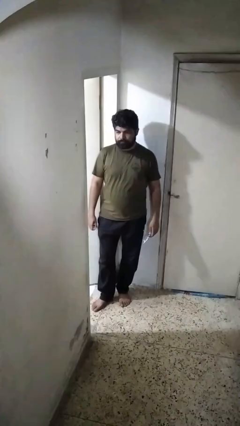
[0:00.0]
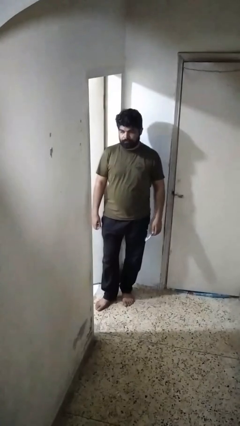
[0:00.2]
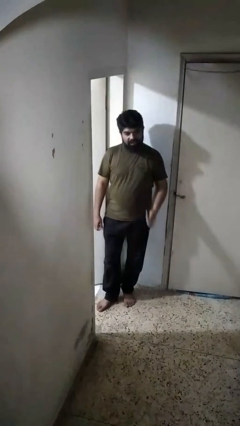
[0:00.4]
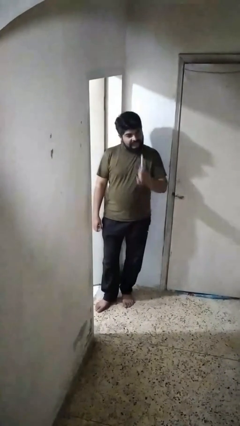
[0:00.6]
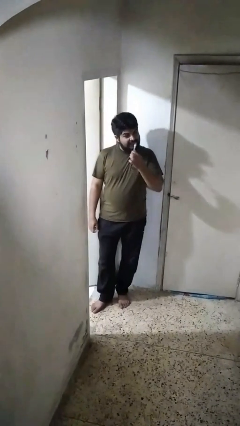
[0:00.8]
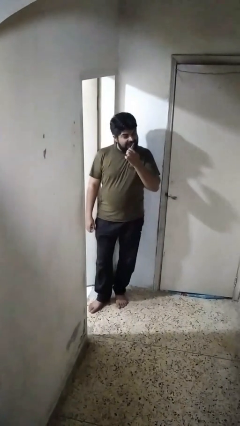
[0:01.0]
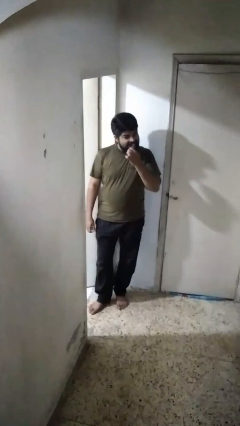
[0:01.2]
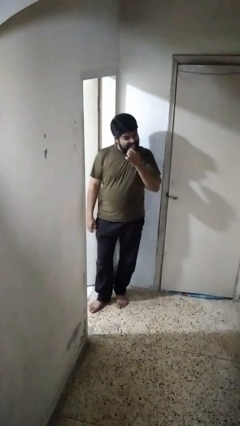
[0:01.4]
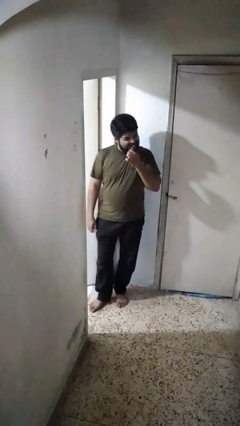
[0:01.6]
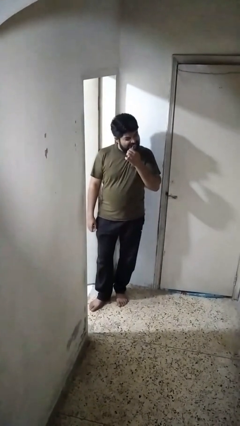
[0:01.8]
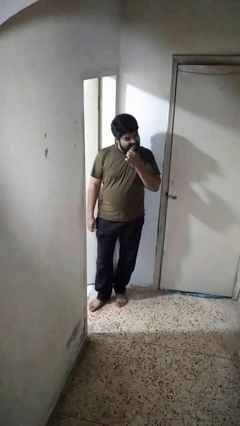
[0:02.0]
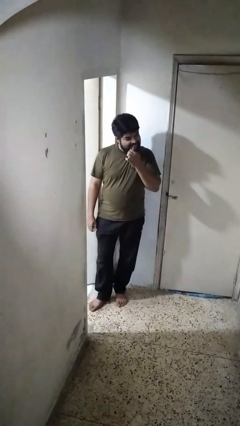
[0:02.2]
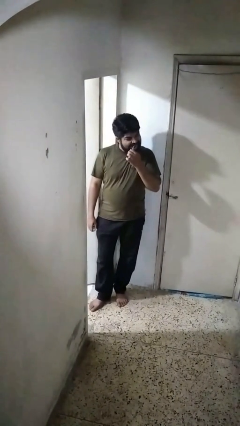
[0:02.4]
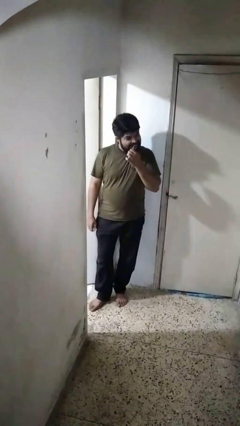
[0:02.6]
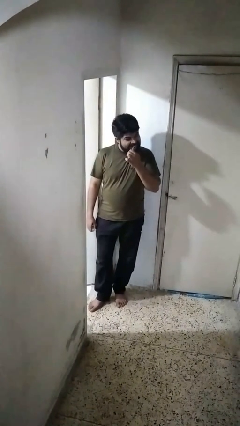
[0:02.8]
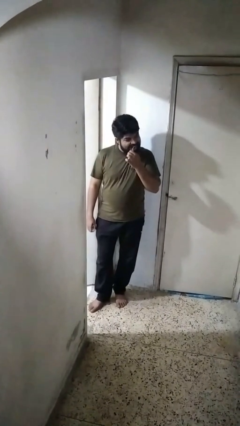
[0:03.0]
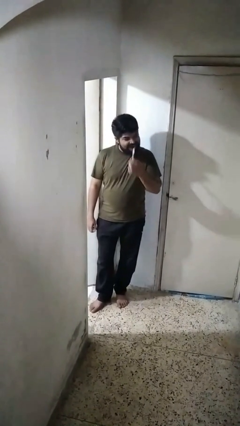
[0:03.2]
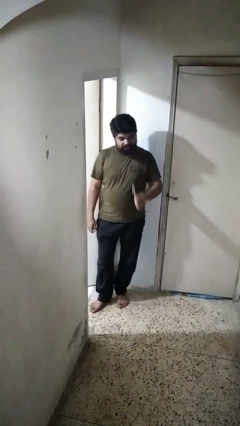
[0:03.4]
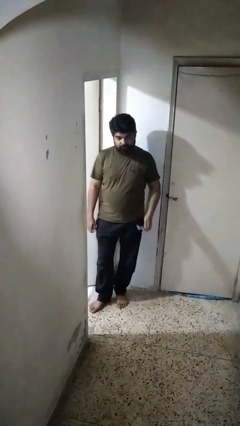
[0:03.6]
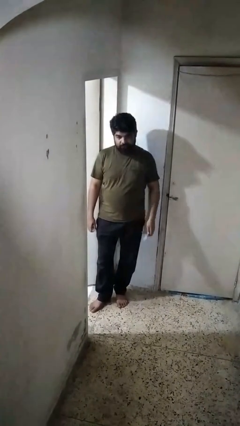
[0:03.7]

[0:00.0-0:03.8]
person brushes teeth

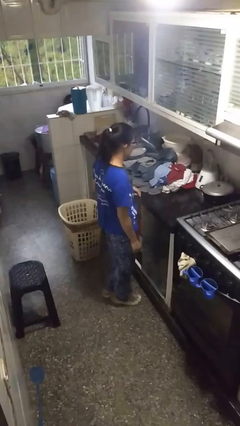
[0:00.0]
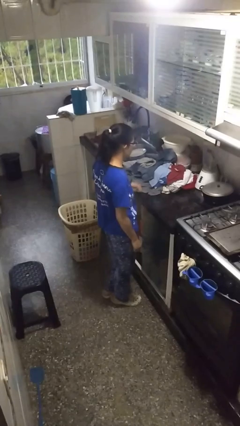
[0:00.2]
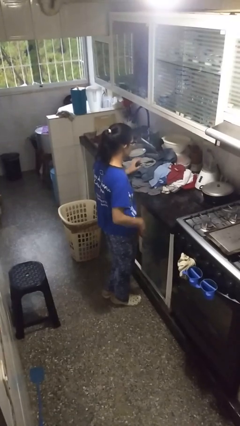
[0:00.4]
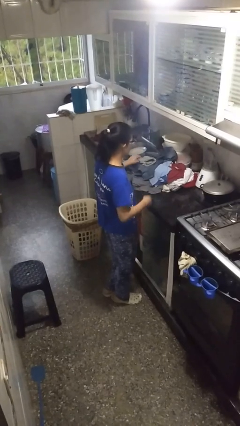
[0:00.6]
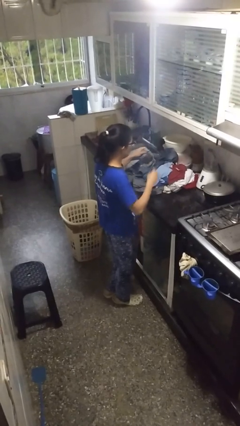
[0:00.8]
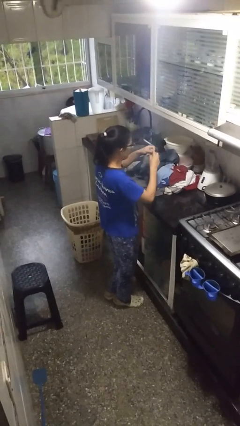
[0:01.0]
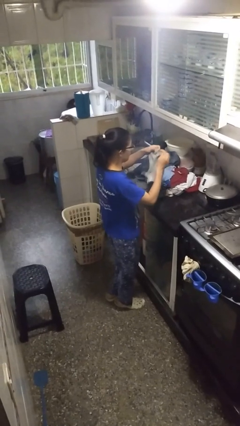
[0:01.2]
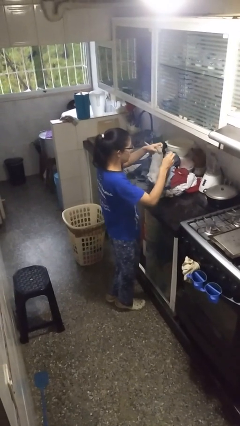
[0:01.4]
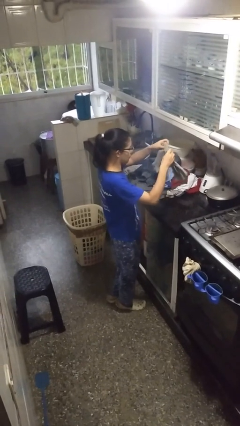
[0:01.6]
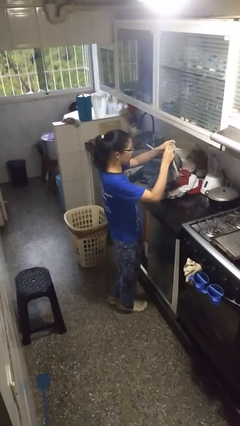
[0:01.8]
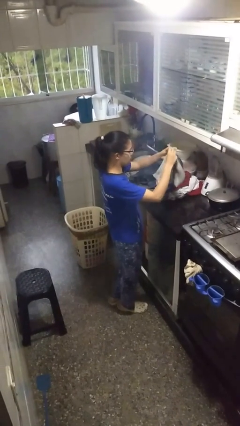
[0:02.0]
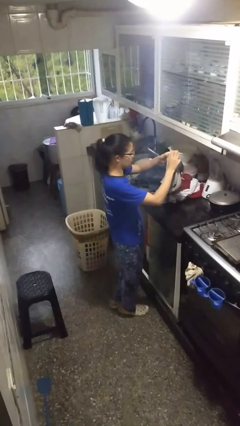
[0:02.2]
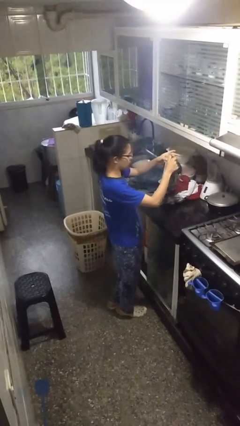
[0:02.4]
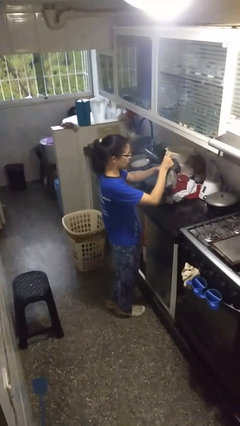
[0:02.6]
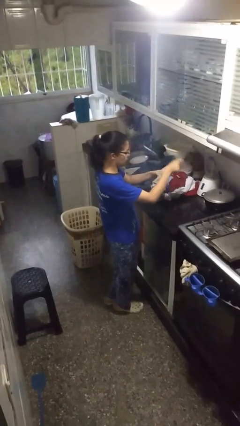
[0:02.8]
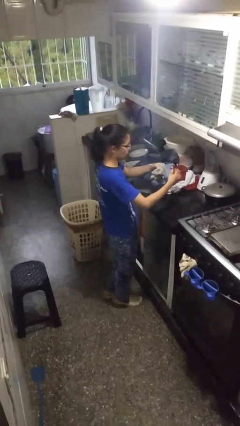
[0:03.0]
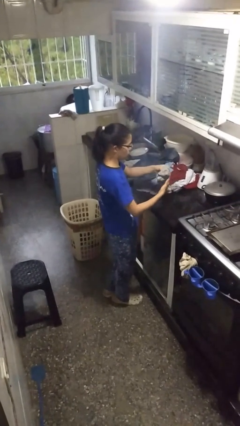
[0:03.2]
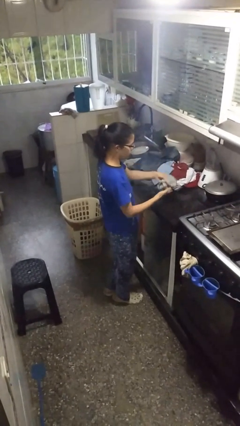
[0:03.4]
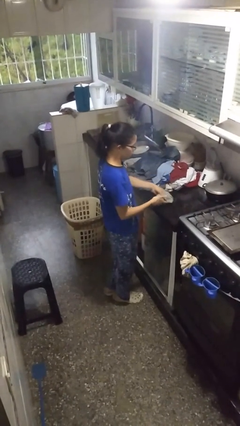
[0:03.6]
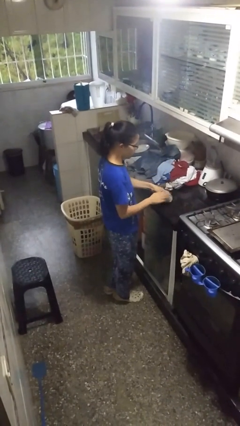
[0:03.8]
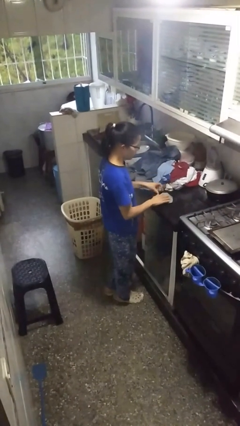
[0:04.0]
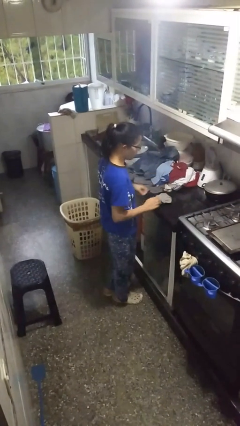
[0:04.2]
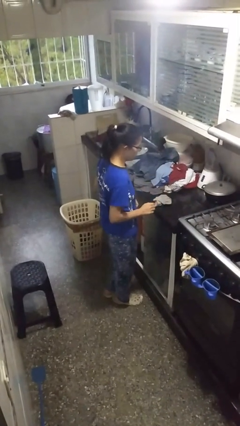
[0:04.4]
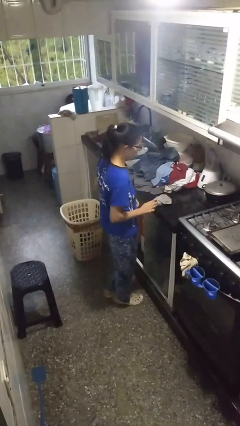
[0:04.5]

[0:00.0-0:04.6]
person folds socks

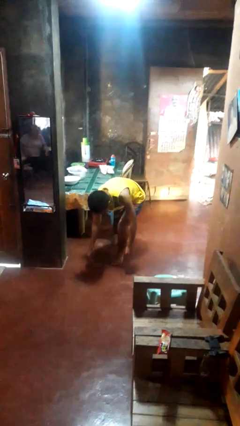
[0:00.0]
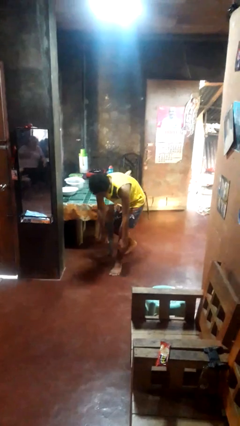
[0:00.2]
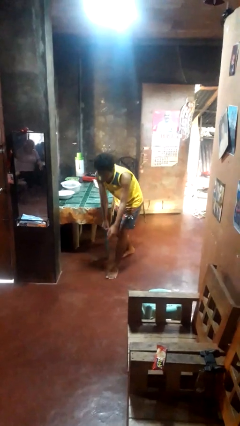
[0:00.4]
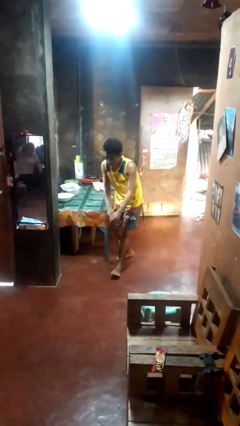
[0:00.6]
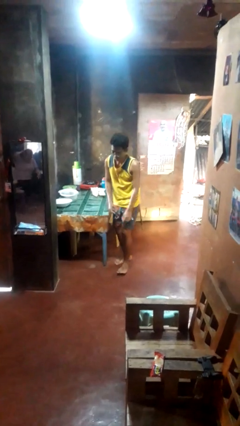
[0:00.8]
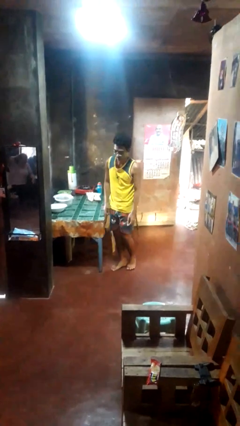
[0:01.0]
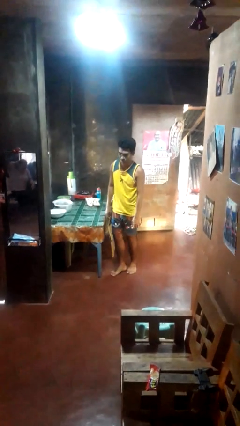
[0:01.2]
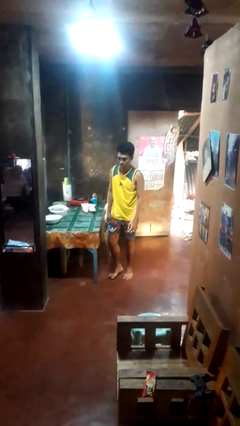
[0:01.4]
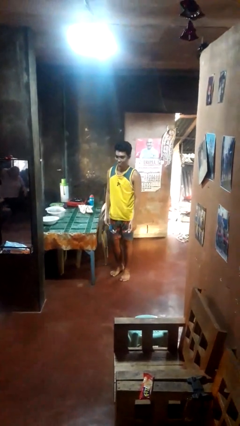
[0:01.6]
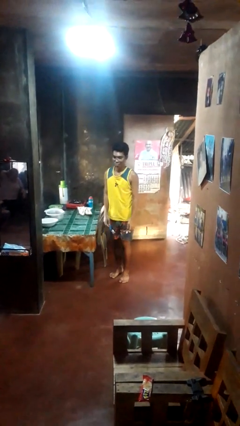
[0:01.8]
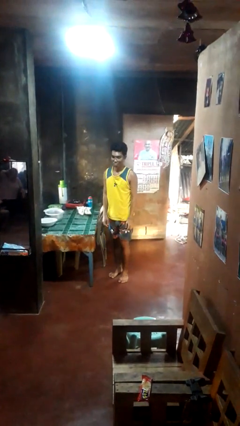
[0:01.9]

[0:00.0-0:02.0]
person stands up from floor

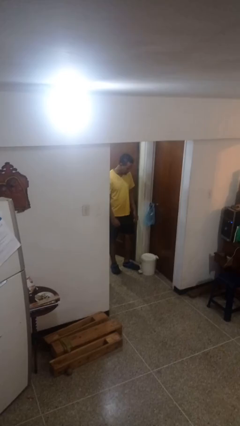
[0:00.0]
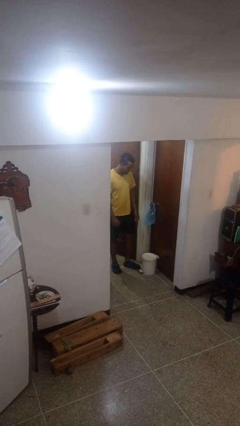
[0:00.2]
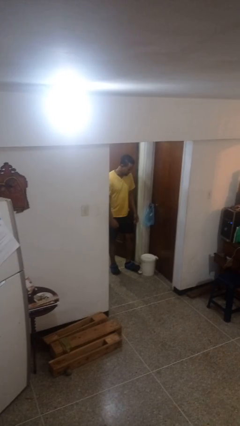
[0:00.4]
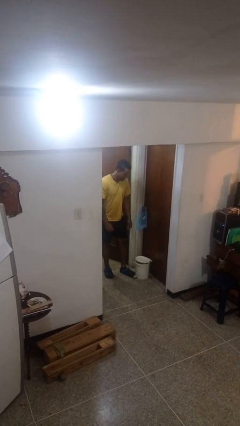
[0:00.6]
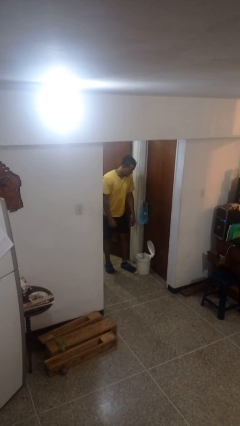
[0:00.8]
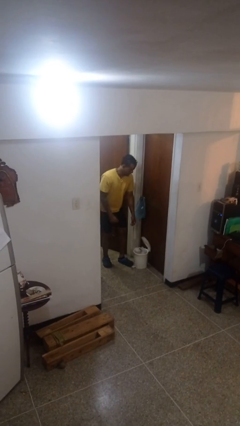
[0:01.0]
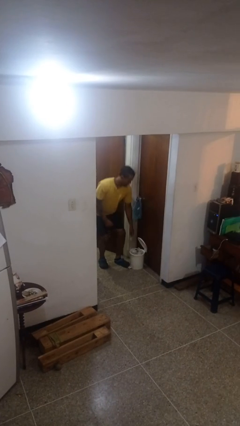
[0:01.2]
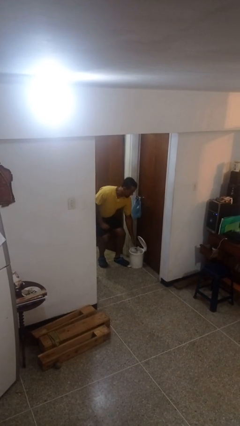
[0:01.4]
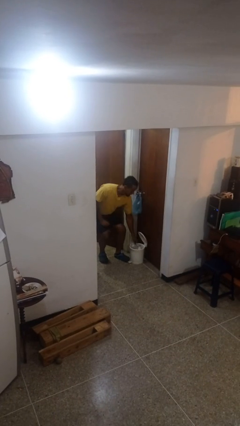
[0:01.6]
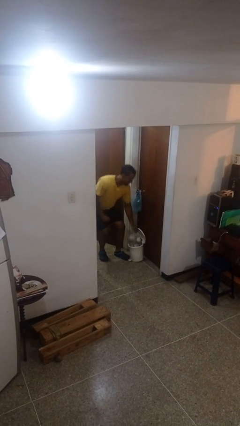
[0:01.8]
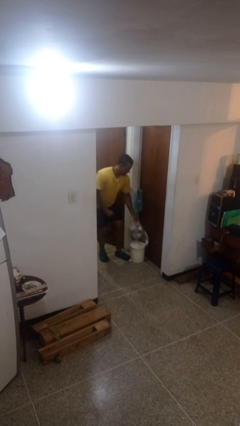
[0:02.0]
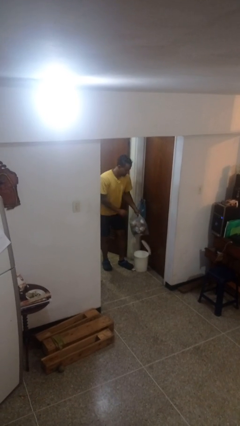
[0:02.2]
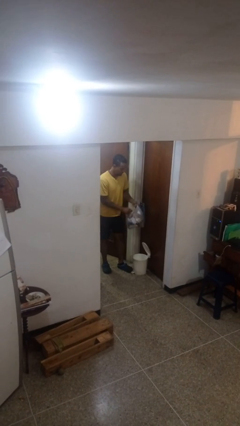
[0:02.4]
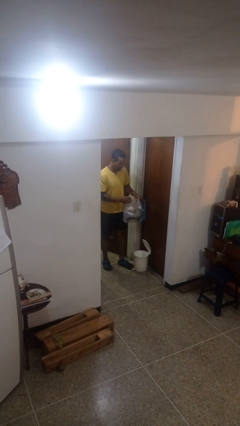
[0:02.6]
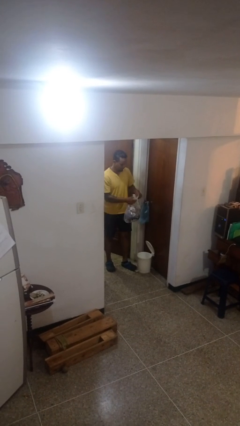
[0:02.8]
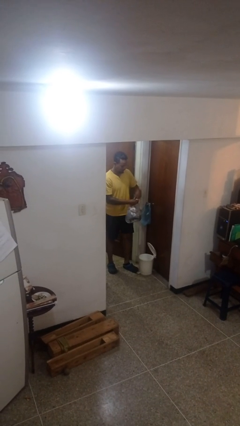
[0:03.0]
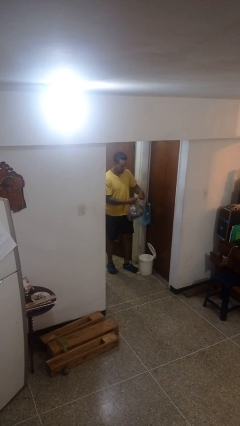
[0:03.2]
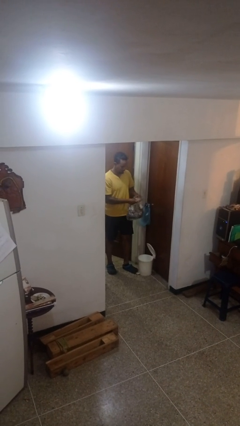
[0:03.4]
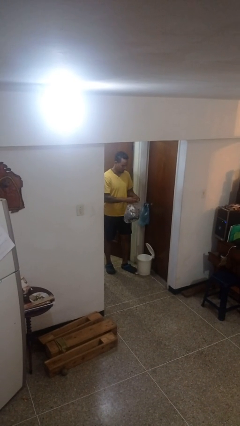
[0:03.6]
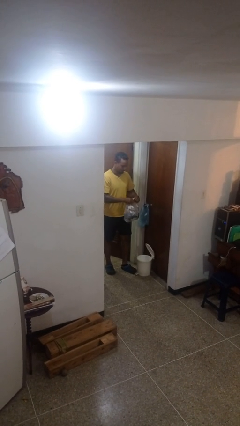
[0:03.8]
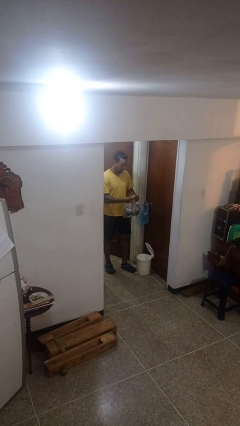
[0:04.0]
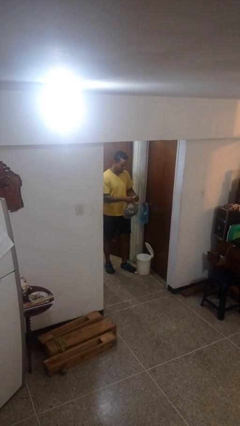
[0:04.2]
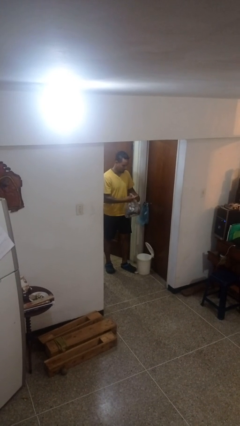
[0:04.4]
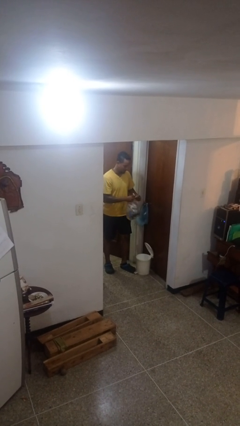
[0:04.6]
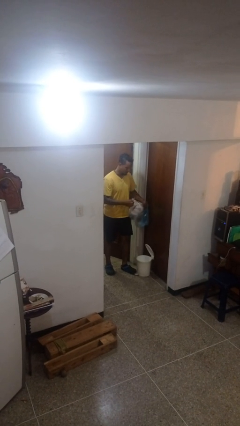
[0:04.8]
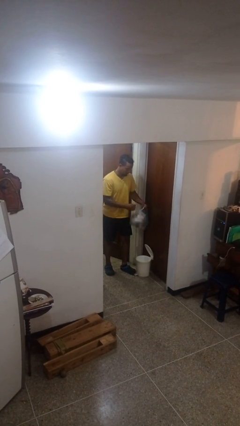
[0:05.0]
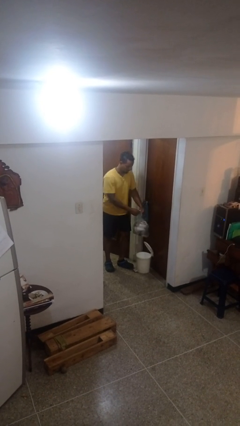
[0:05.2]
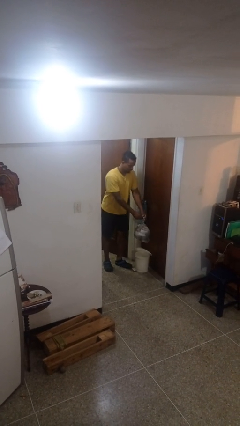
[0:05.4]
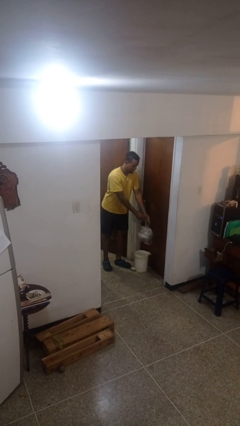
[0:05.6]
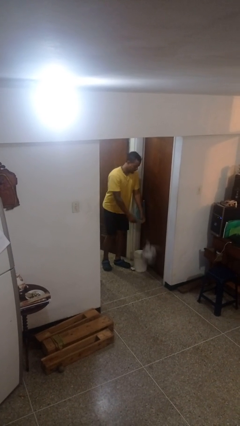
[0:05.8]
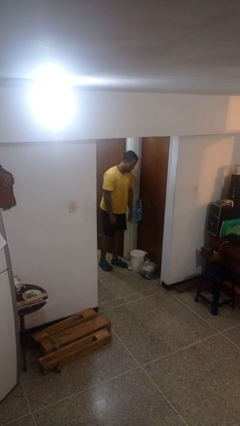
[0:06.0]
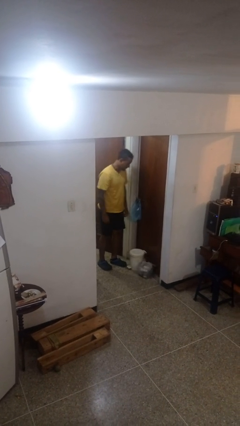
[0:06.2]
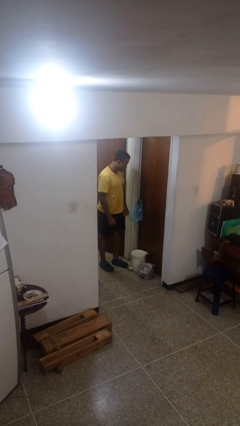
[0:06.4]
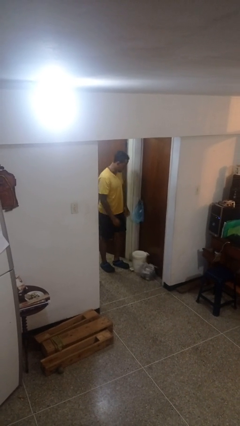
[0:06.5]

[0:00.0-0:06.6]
person removes trashbag from trashcan

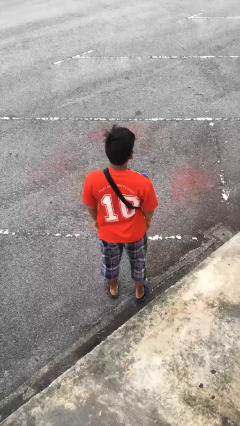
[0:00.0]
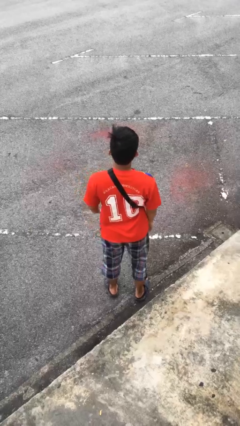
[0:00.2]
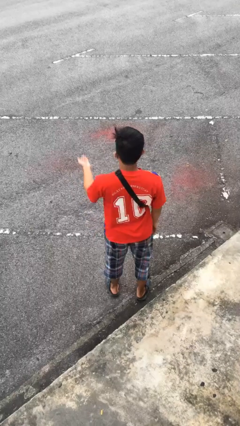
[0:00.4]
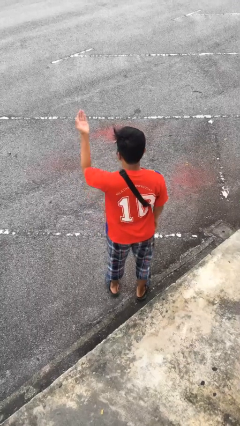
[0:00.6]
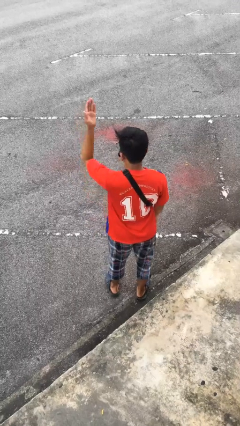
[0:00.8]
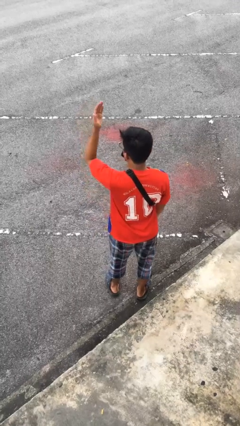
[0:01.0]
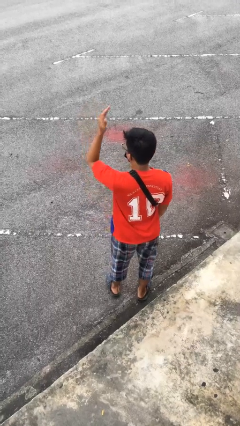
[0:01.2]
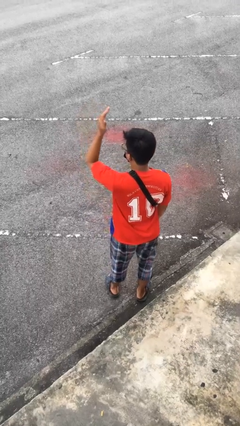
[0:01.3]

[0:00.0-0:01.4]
person gestures swipe up
